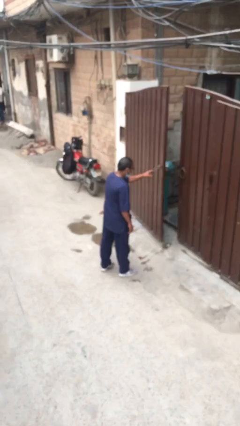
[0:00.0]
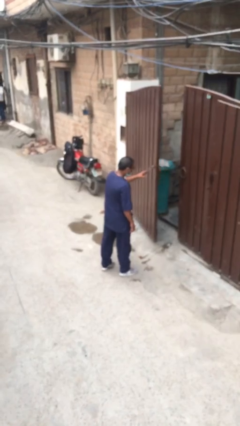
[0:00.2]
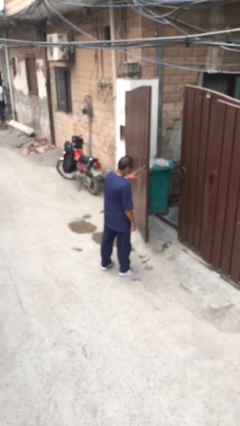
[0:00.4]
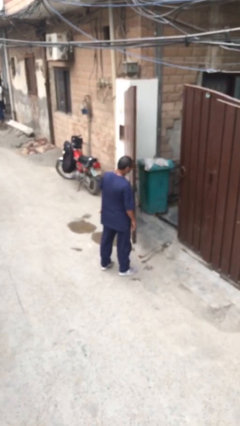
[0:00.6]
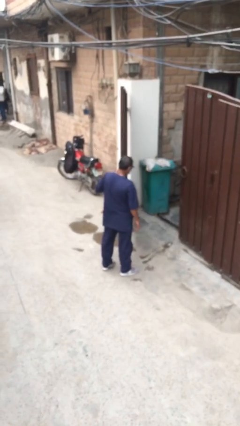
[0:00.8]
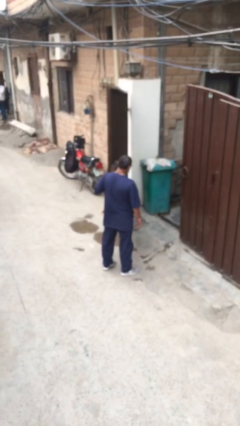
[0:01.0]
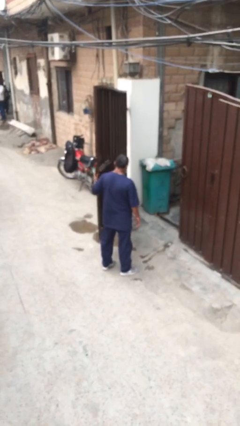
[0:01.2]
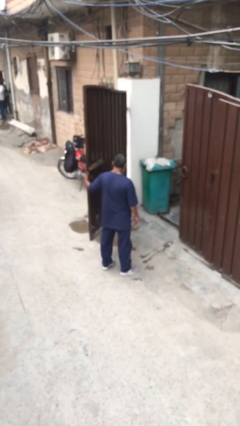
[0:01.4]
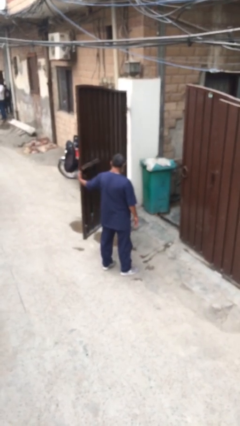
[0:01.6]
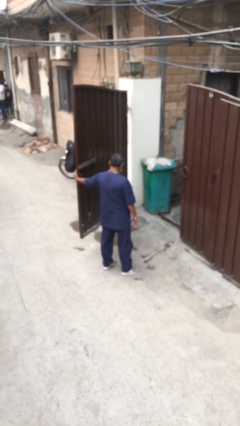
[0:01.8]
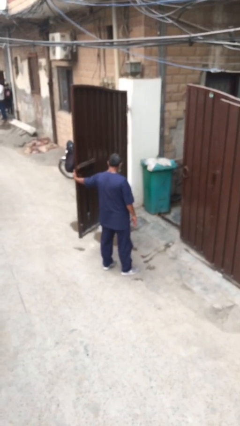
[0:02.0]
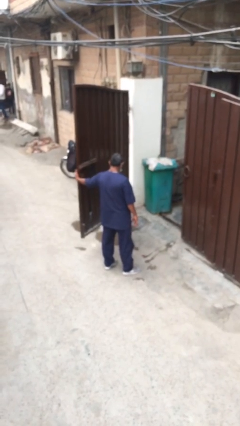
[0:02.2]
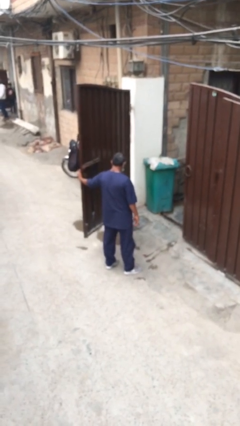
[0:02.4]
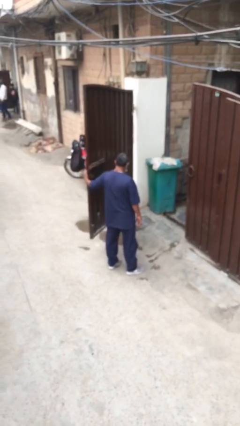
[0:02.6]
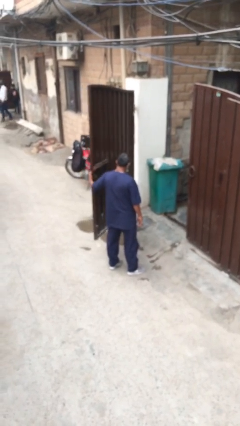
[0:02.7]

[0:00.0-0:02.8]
person opens facility door

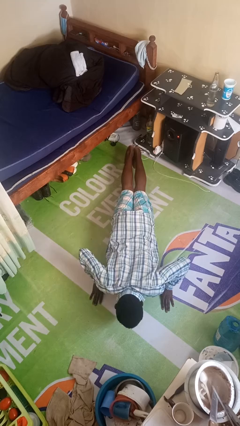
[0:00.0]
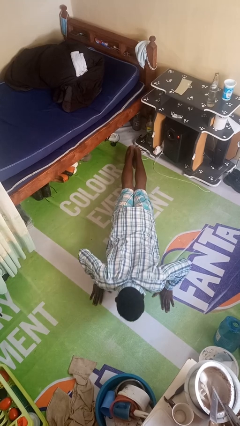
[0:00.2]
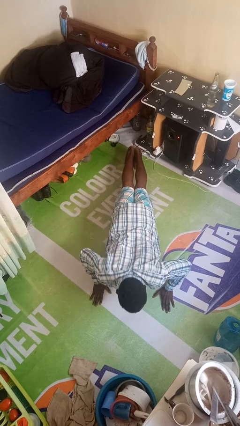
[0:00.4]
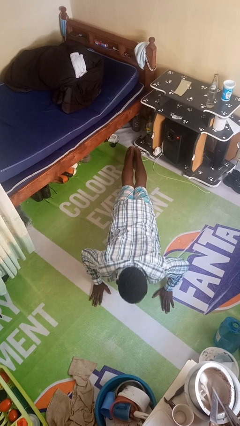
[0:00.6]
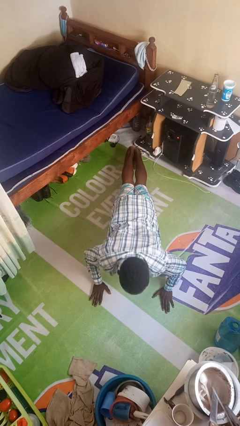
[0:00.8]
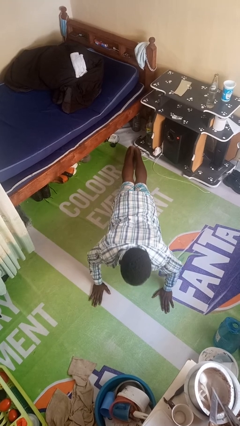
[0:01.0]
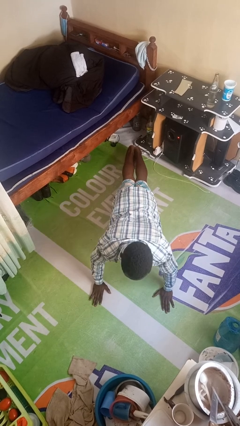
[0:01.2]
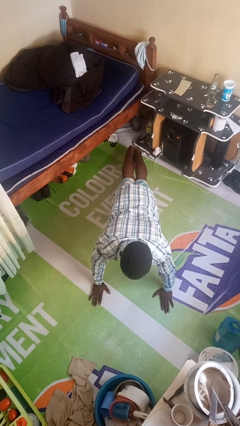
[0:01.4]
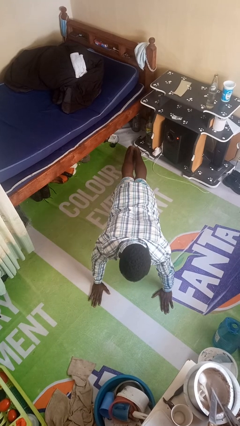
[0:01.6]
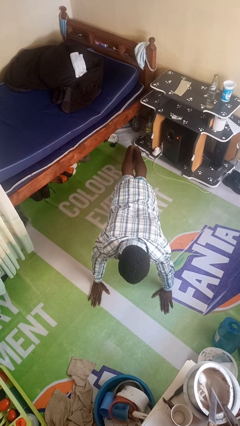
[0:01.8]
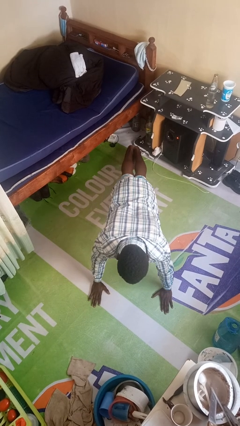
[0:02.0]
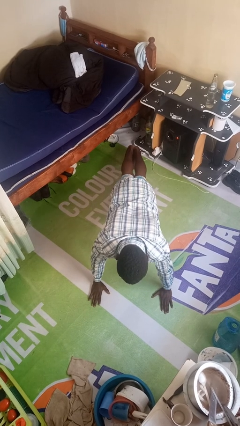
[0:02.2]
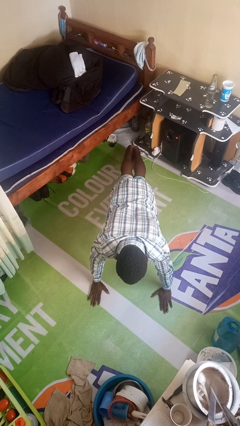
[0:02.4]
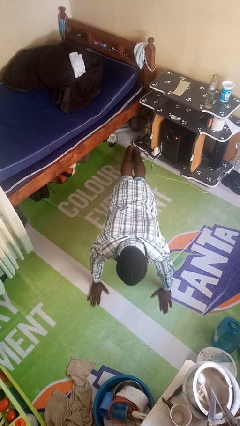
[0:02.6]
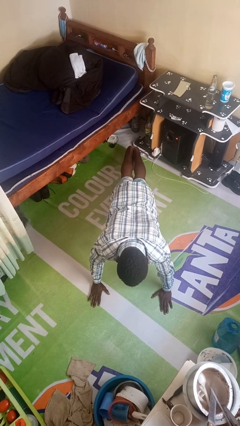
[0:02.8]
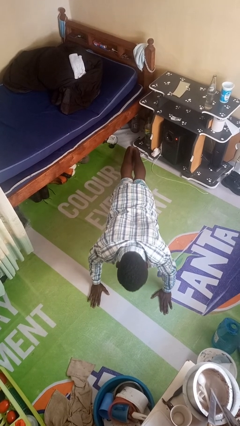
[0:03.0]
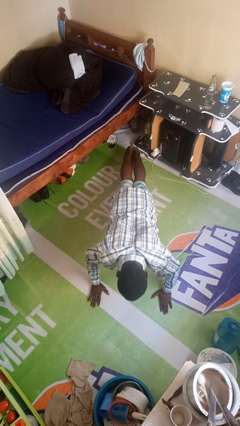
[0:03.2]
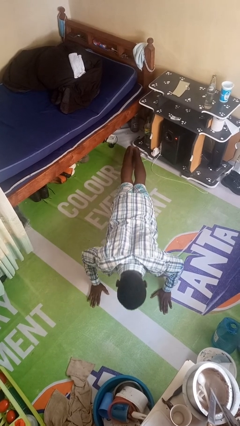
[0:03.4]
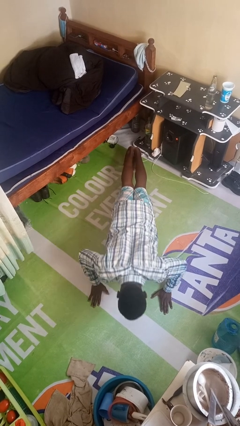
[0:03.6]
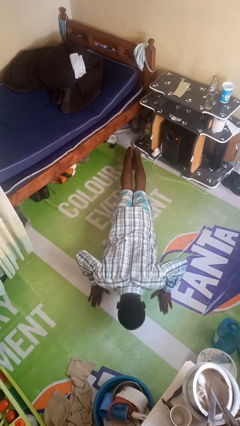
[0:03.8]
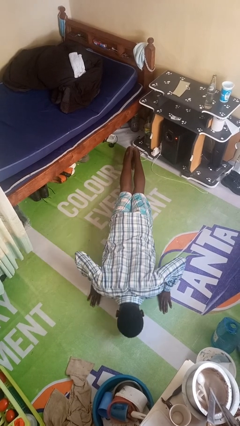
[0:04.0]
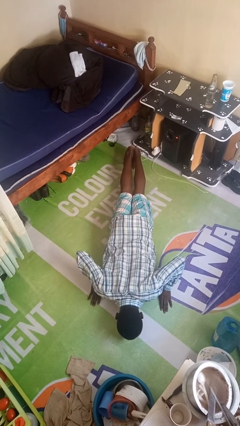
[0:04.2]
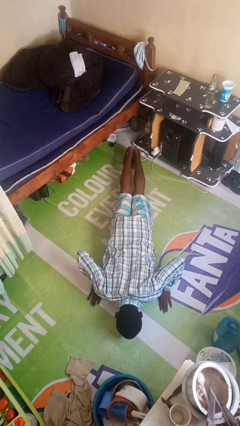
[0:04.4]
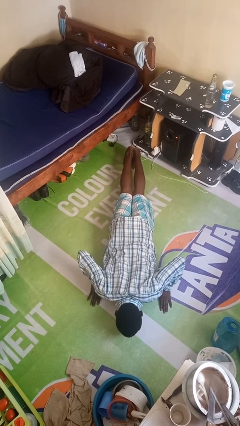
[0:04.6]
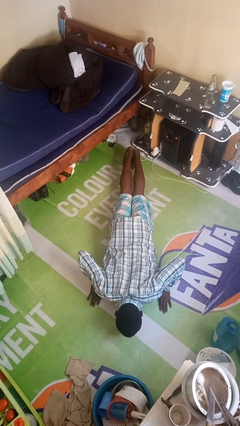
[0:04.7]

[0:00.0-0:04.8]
person exercises with pushup

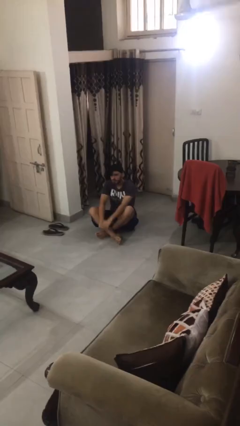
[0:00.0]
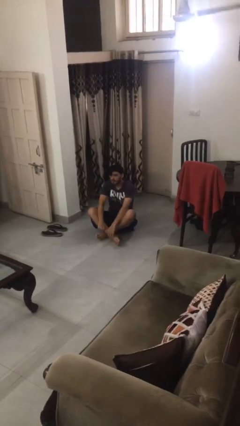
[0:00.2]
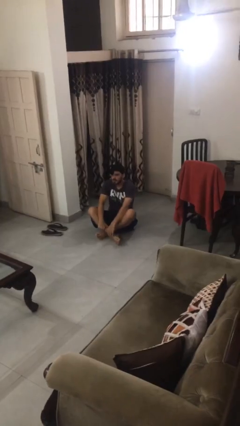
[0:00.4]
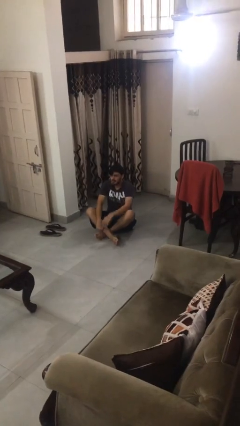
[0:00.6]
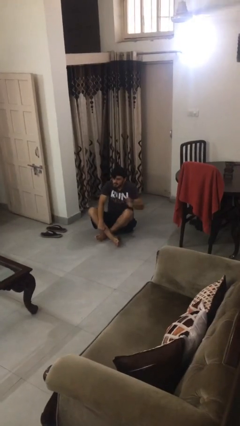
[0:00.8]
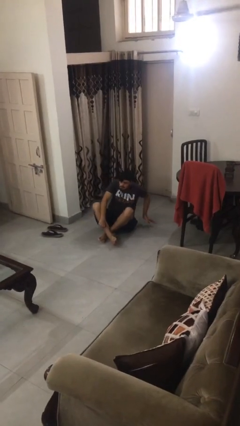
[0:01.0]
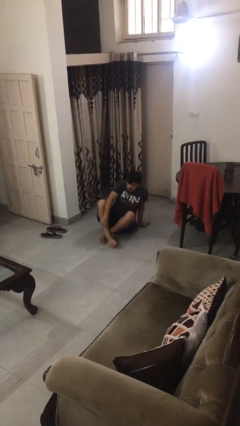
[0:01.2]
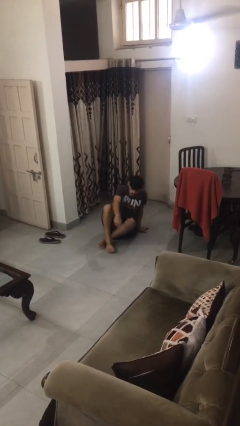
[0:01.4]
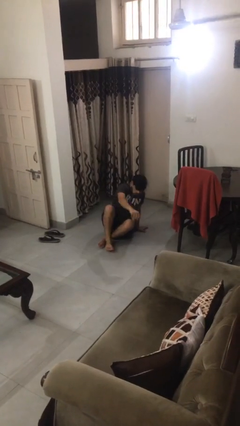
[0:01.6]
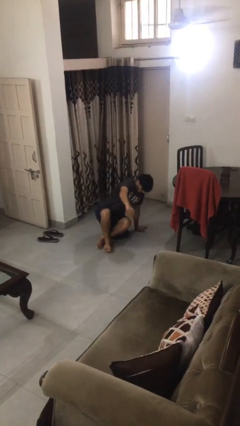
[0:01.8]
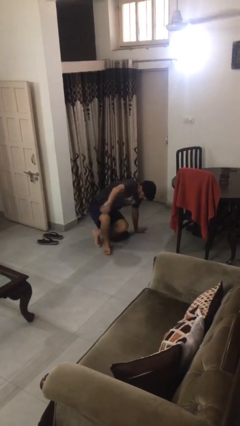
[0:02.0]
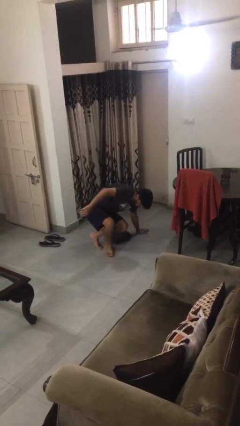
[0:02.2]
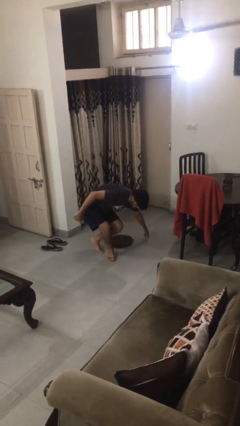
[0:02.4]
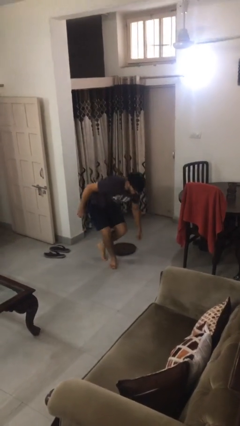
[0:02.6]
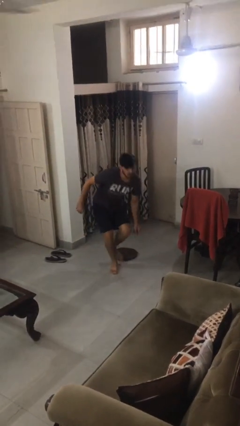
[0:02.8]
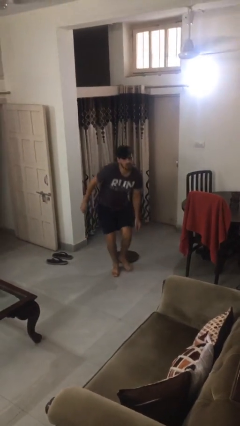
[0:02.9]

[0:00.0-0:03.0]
person stands up from floor

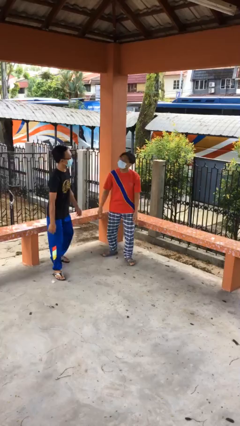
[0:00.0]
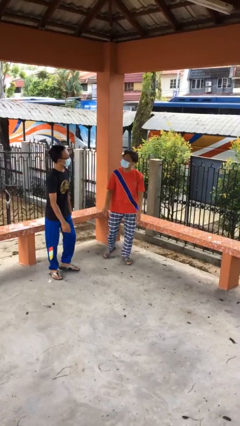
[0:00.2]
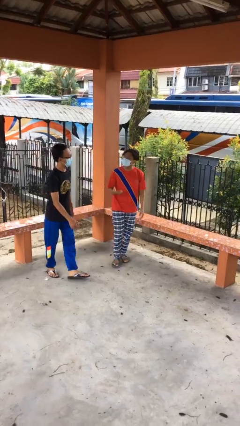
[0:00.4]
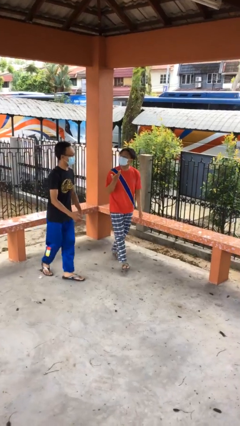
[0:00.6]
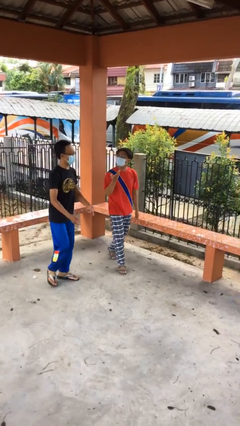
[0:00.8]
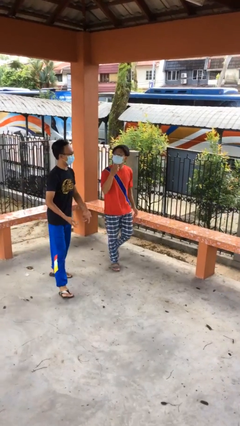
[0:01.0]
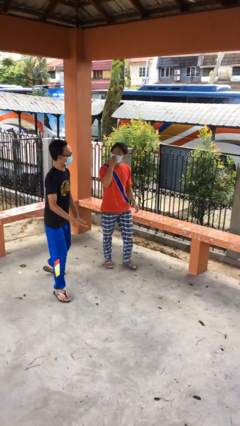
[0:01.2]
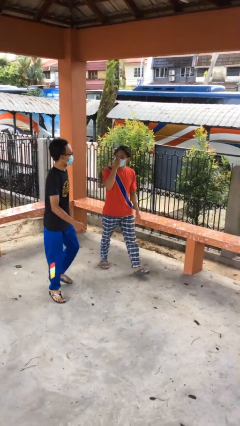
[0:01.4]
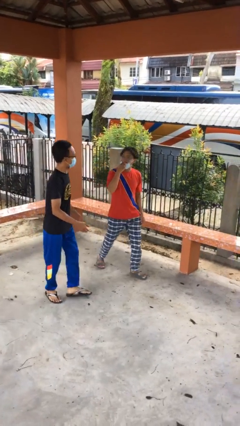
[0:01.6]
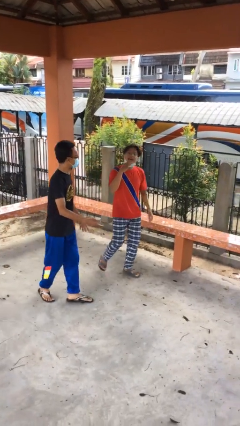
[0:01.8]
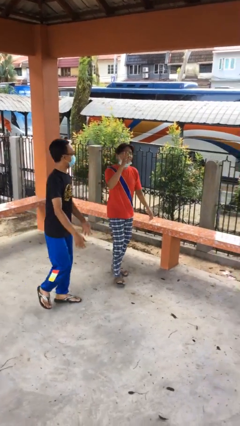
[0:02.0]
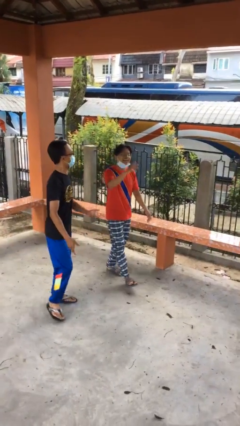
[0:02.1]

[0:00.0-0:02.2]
person talks to person

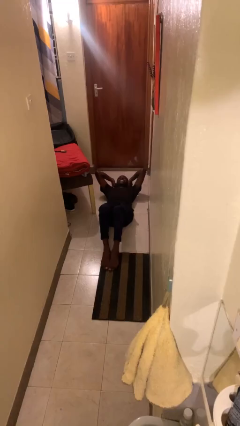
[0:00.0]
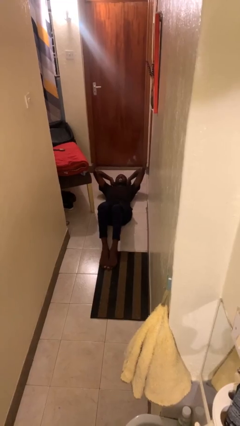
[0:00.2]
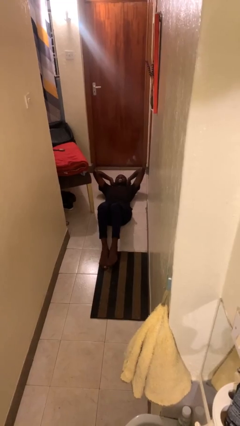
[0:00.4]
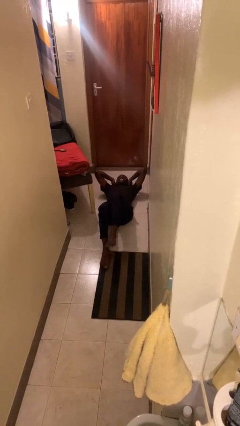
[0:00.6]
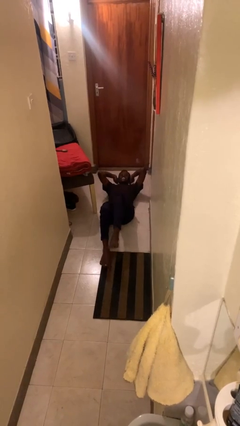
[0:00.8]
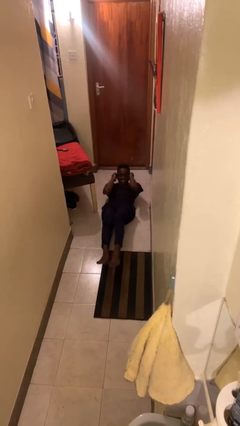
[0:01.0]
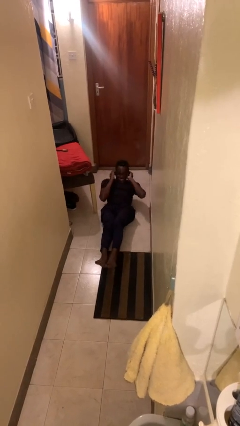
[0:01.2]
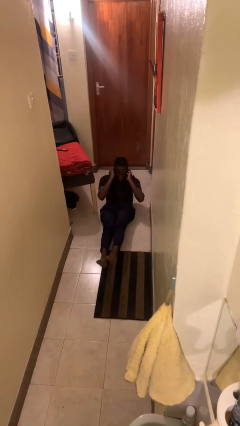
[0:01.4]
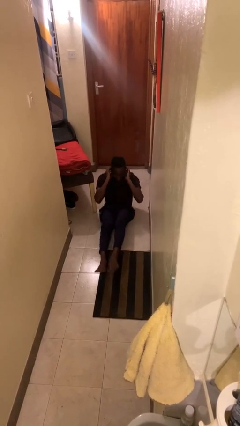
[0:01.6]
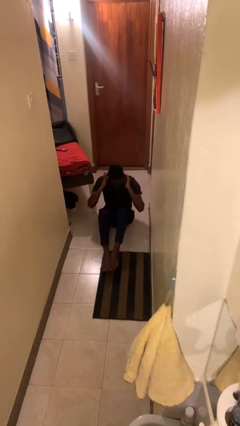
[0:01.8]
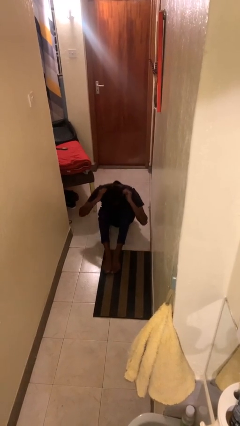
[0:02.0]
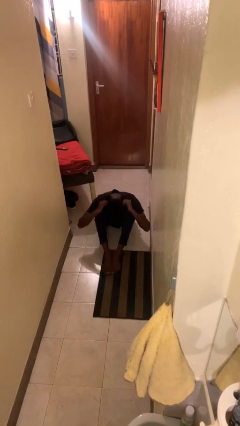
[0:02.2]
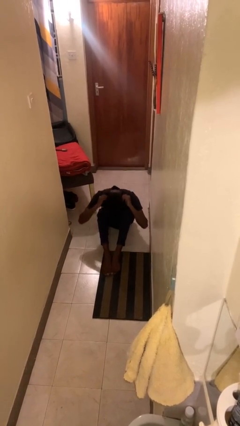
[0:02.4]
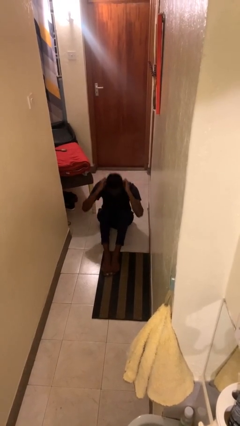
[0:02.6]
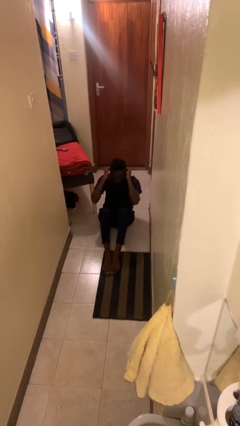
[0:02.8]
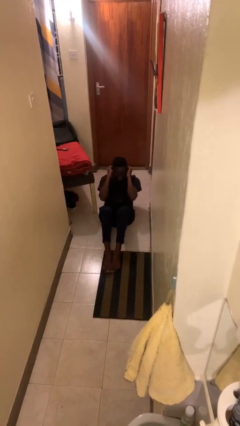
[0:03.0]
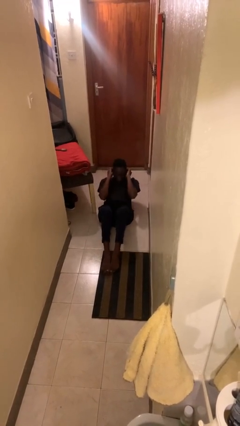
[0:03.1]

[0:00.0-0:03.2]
person exercises with situp

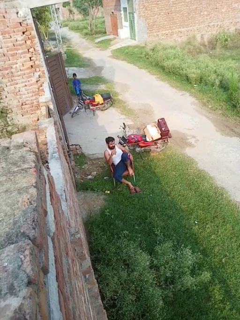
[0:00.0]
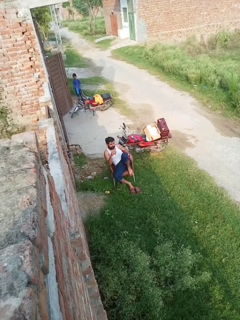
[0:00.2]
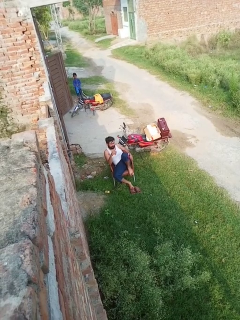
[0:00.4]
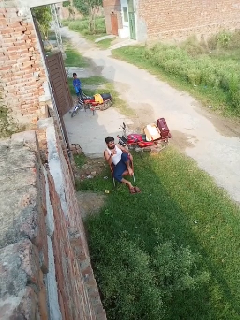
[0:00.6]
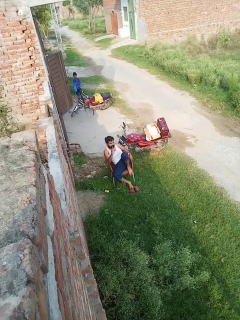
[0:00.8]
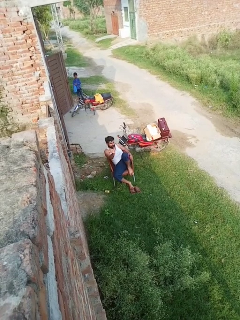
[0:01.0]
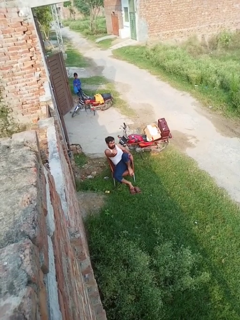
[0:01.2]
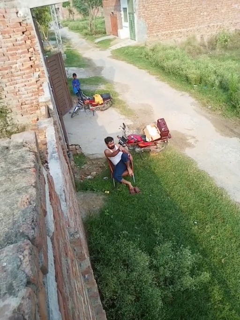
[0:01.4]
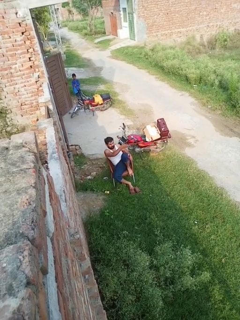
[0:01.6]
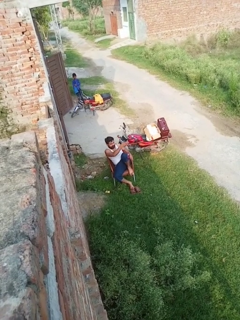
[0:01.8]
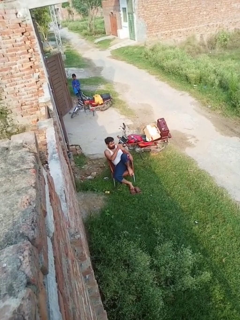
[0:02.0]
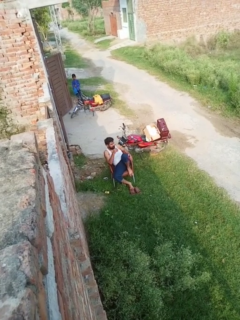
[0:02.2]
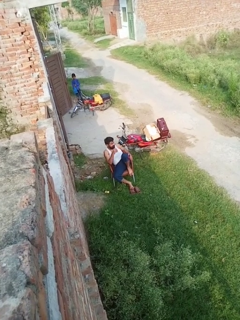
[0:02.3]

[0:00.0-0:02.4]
person gestures swipe left
